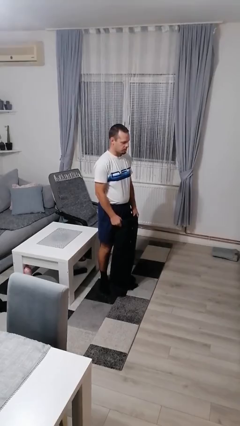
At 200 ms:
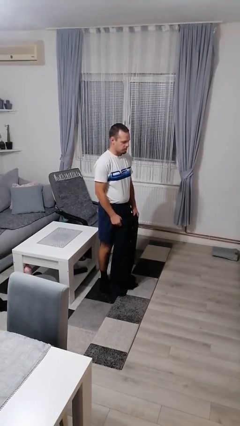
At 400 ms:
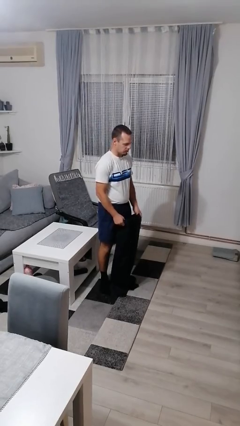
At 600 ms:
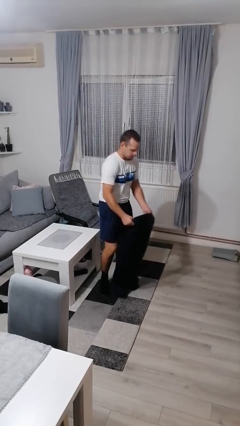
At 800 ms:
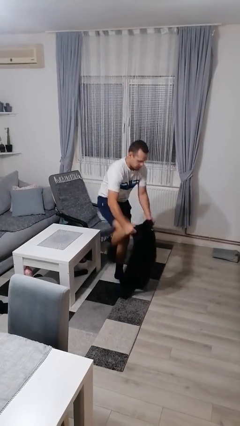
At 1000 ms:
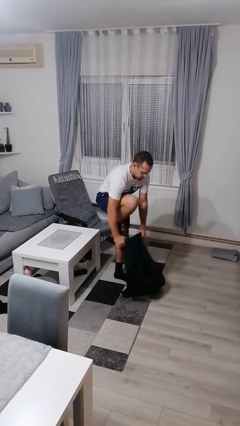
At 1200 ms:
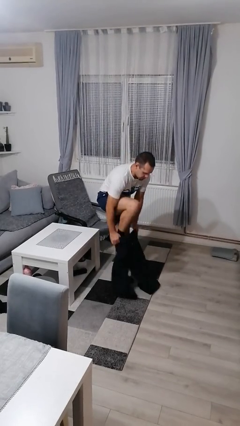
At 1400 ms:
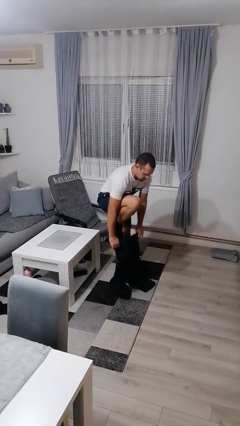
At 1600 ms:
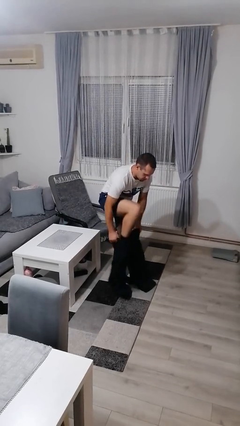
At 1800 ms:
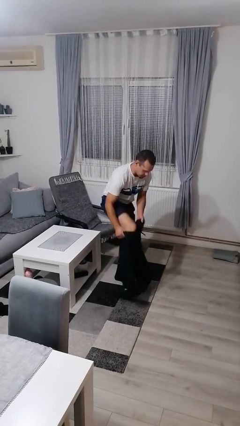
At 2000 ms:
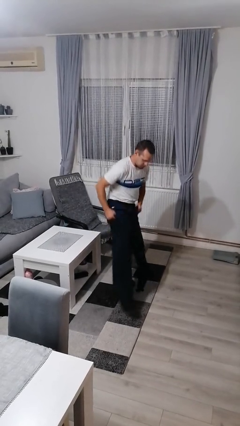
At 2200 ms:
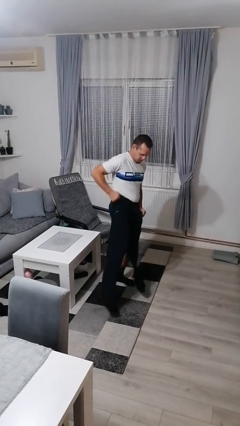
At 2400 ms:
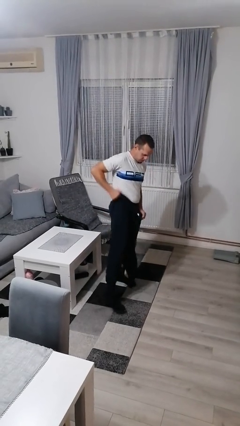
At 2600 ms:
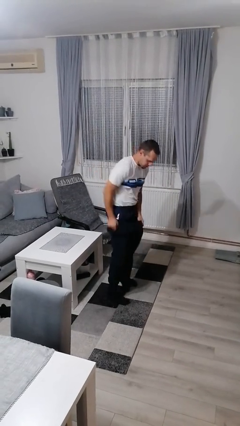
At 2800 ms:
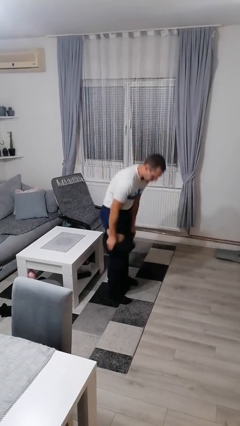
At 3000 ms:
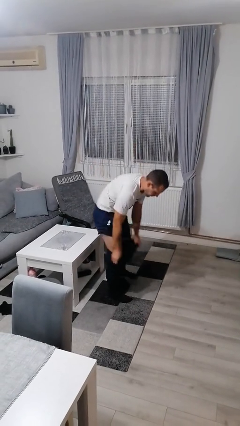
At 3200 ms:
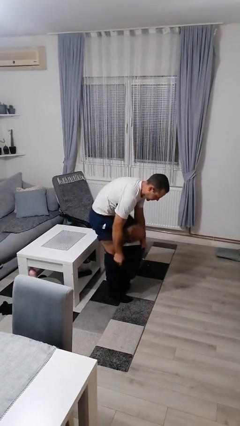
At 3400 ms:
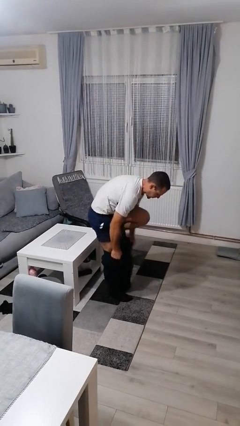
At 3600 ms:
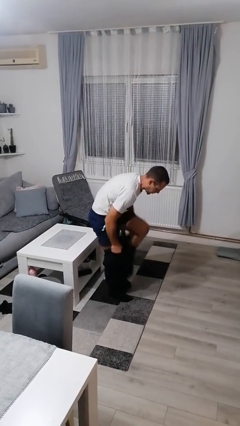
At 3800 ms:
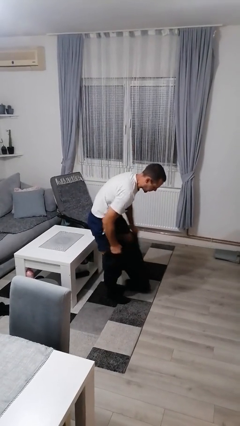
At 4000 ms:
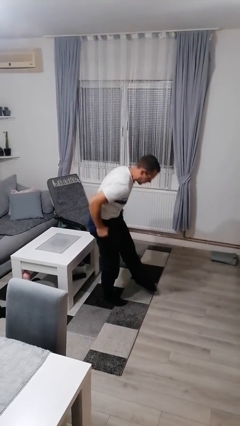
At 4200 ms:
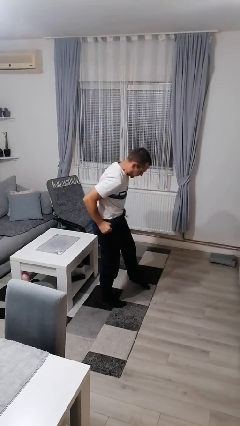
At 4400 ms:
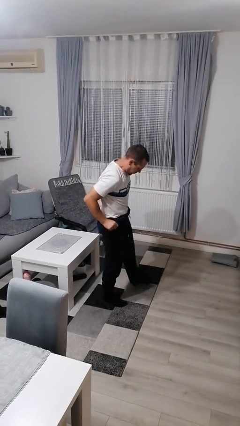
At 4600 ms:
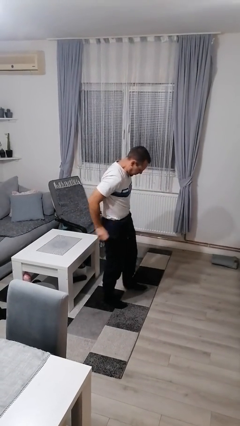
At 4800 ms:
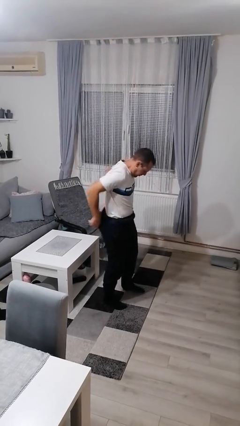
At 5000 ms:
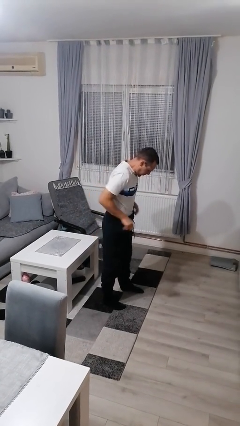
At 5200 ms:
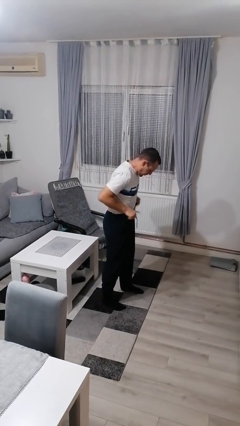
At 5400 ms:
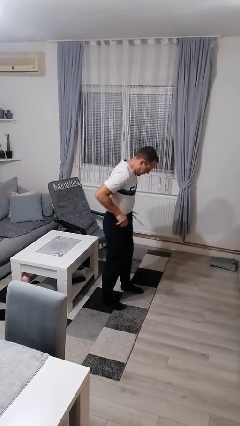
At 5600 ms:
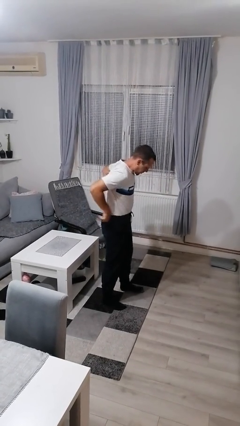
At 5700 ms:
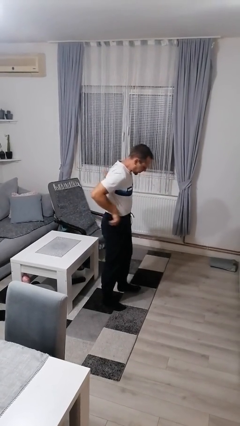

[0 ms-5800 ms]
person takes off pants

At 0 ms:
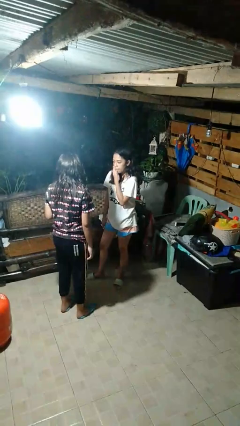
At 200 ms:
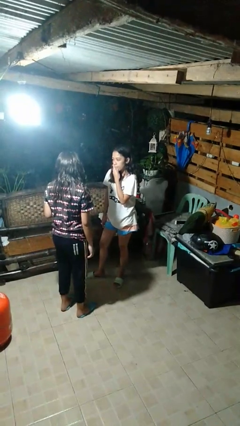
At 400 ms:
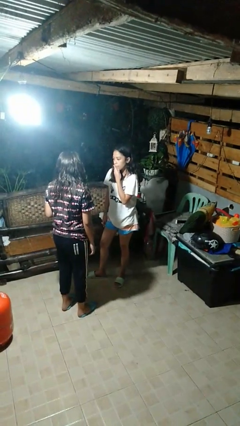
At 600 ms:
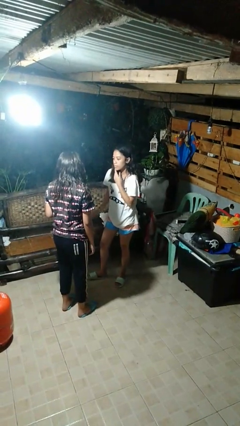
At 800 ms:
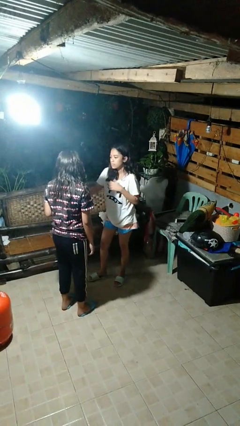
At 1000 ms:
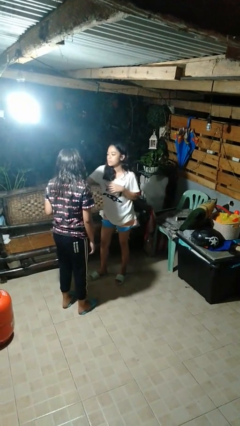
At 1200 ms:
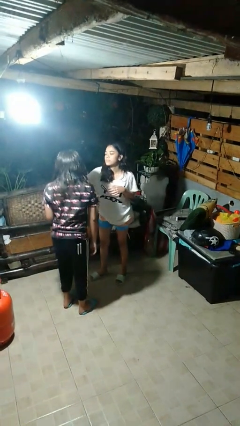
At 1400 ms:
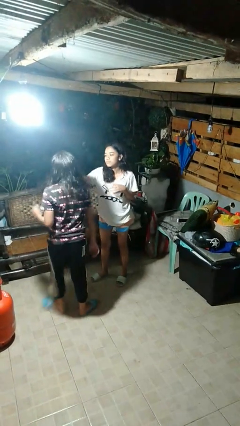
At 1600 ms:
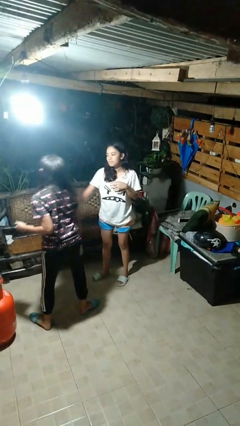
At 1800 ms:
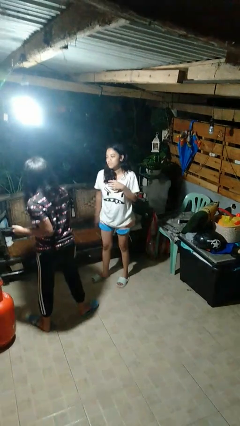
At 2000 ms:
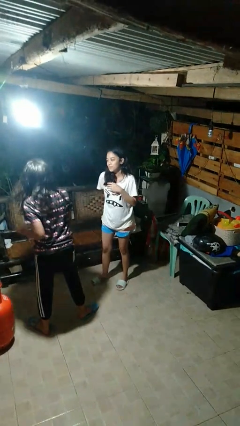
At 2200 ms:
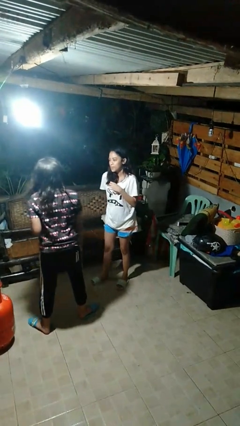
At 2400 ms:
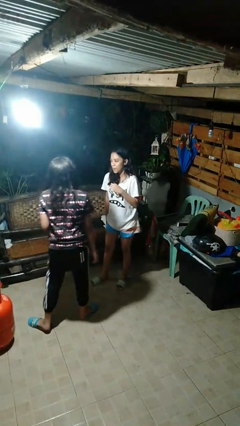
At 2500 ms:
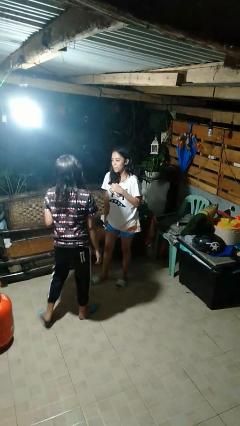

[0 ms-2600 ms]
person shoves person

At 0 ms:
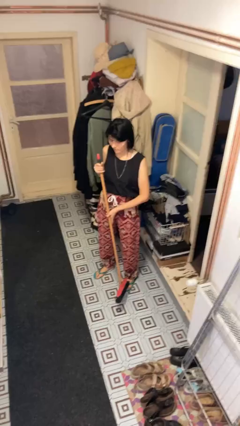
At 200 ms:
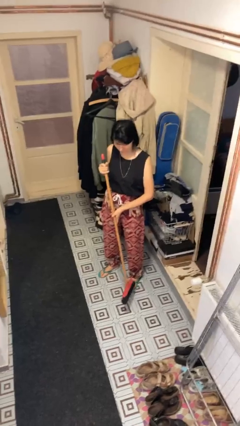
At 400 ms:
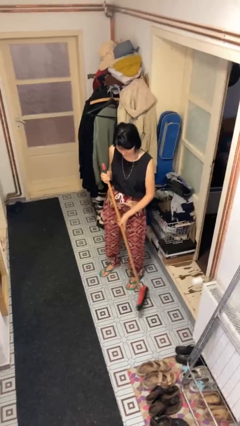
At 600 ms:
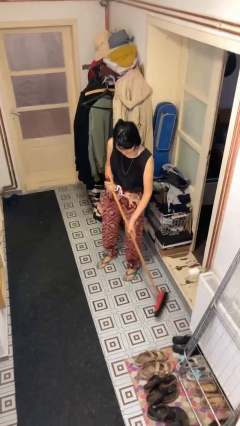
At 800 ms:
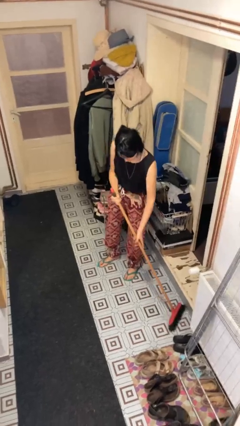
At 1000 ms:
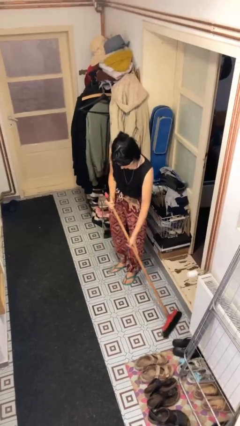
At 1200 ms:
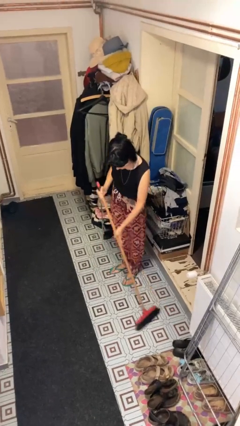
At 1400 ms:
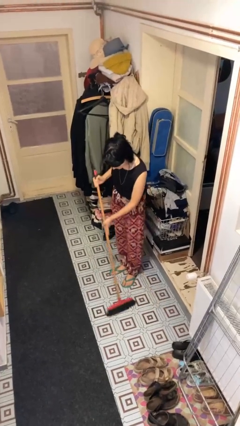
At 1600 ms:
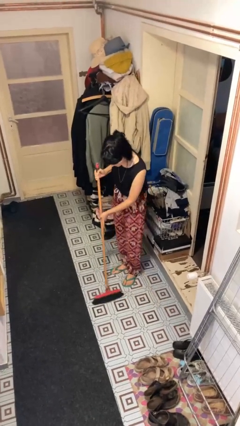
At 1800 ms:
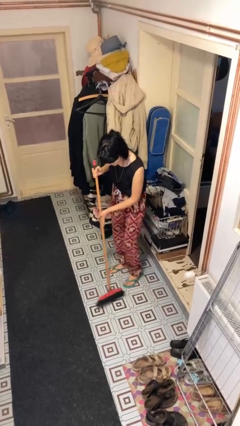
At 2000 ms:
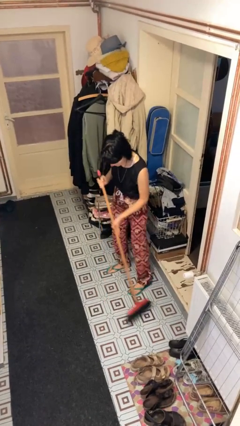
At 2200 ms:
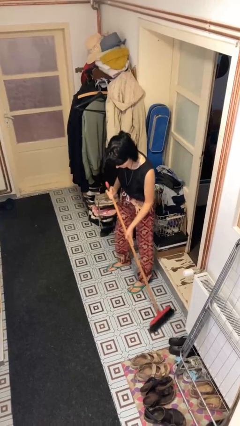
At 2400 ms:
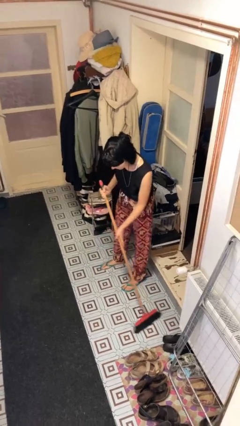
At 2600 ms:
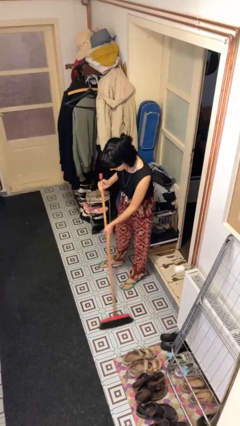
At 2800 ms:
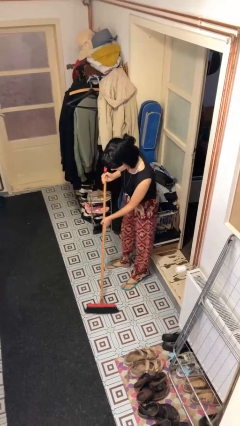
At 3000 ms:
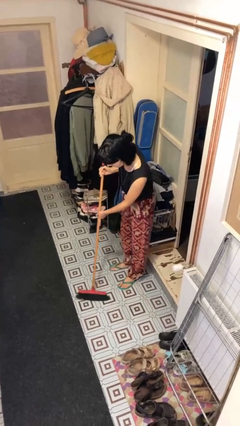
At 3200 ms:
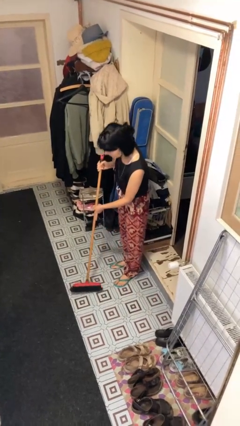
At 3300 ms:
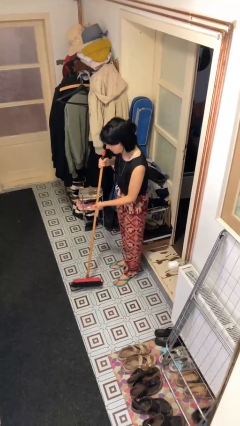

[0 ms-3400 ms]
person sweeps floor

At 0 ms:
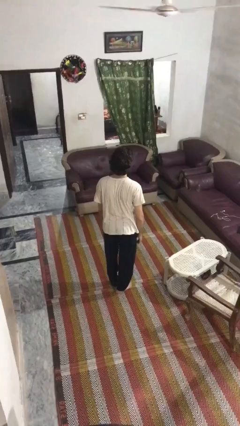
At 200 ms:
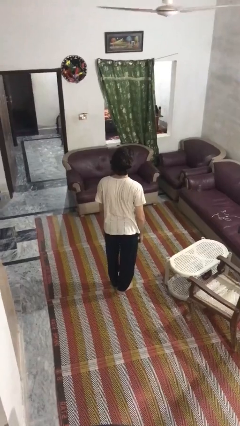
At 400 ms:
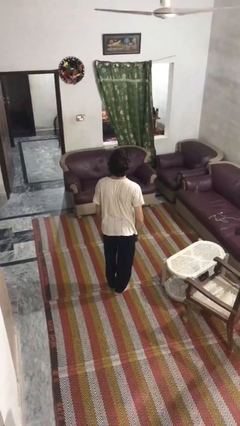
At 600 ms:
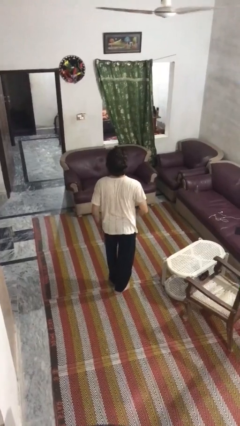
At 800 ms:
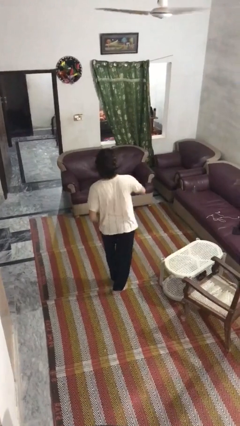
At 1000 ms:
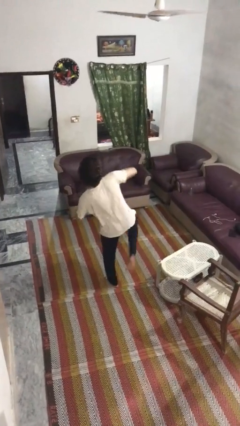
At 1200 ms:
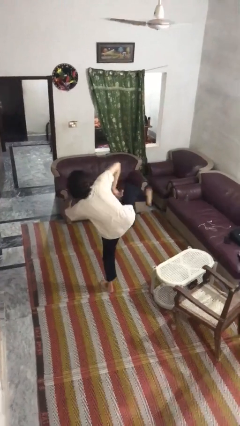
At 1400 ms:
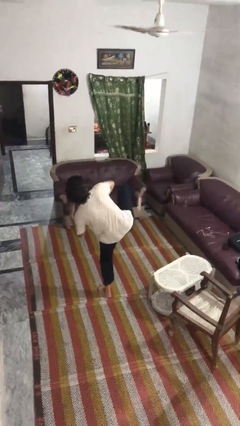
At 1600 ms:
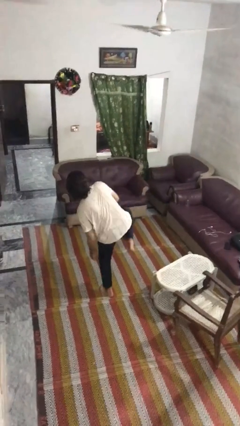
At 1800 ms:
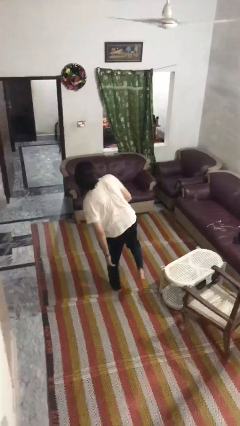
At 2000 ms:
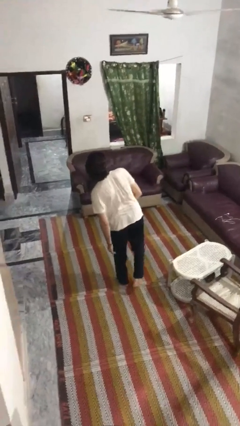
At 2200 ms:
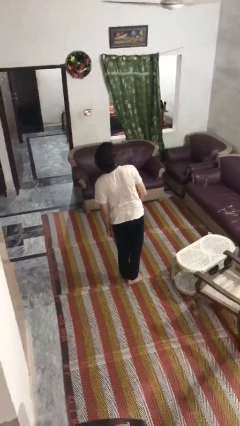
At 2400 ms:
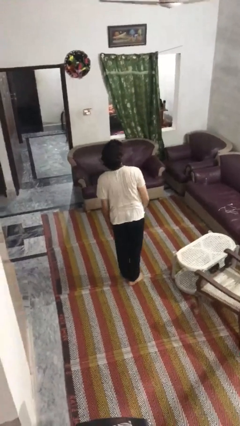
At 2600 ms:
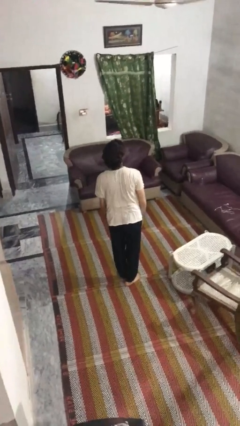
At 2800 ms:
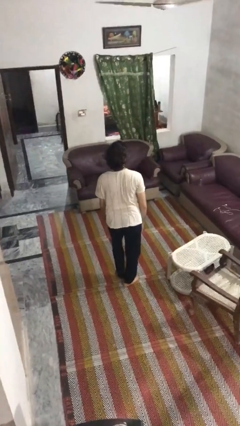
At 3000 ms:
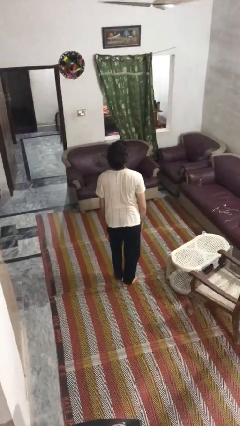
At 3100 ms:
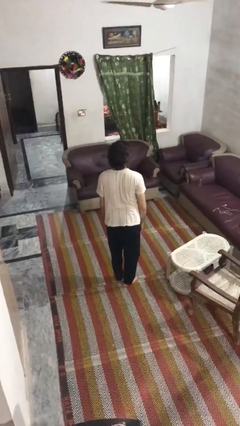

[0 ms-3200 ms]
person karate kicks

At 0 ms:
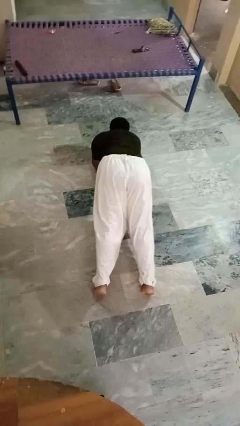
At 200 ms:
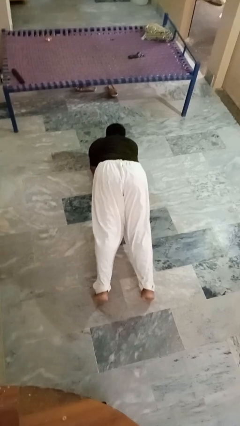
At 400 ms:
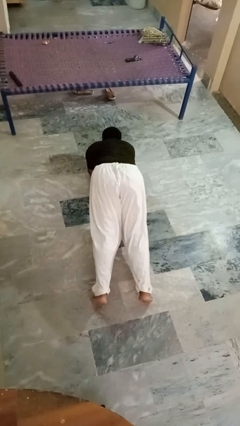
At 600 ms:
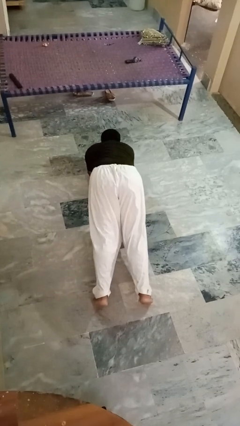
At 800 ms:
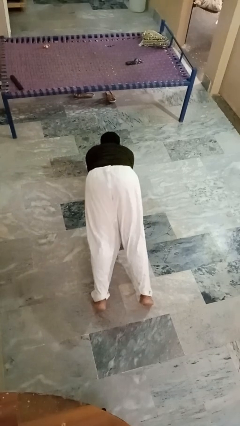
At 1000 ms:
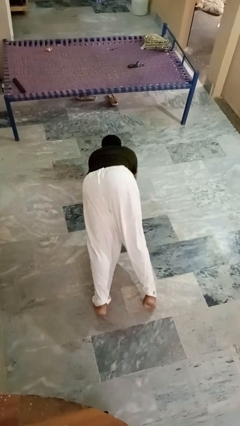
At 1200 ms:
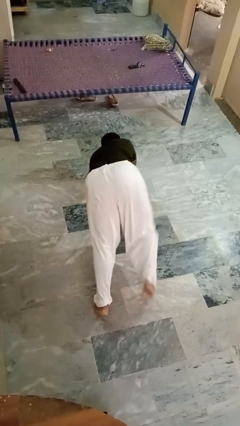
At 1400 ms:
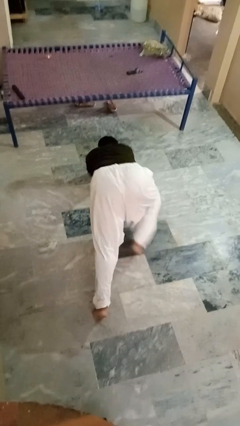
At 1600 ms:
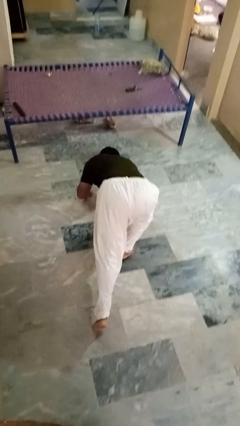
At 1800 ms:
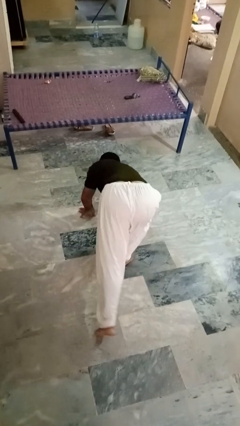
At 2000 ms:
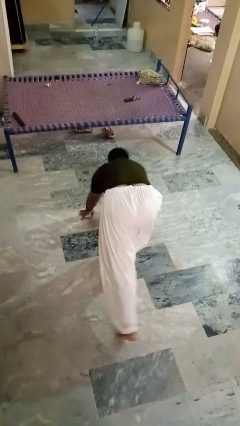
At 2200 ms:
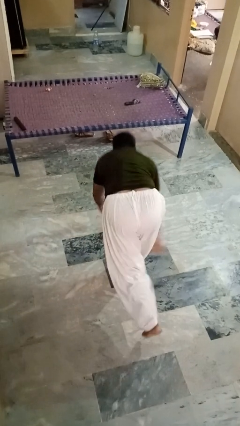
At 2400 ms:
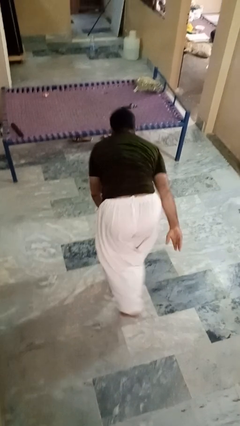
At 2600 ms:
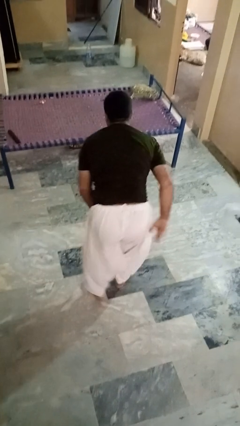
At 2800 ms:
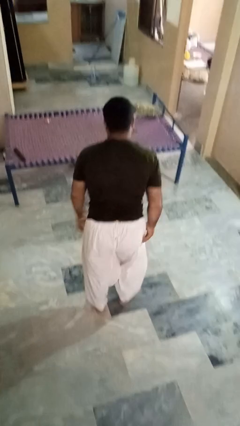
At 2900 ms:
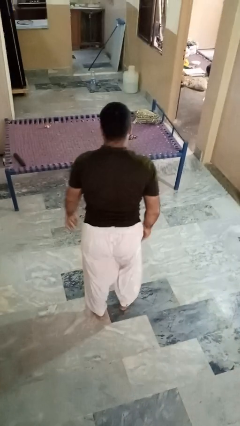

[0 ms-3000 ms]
person stands up from floor
